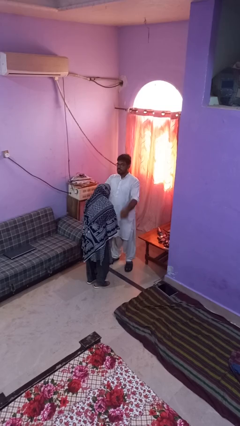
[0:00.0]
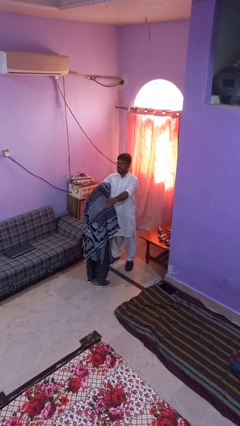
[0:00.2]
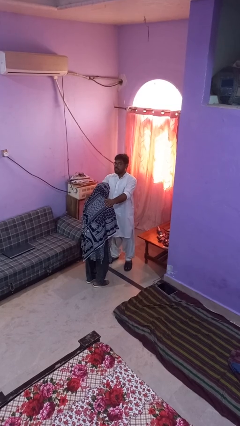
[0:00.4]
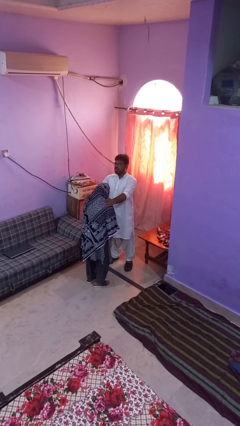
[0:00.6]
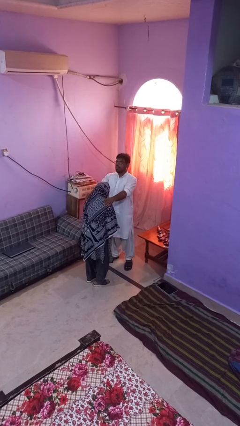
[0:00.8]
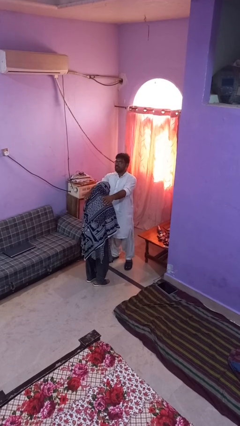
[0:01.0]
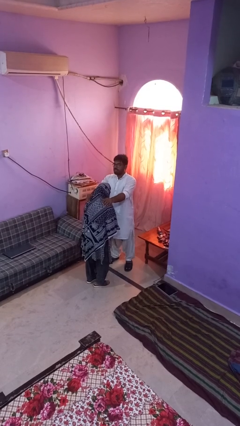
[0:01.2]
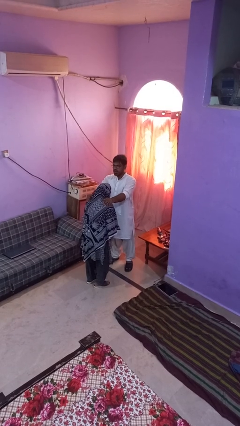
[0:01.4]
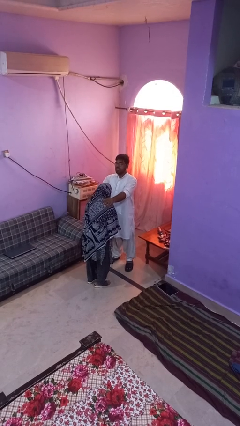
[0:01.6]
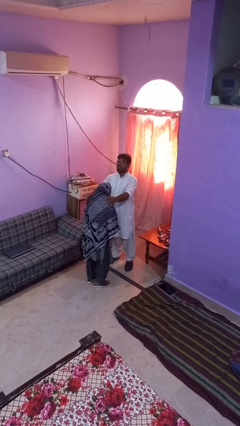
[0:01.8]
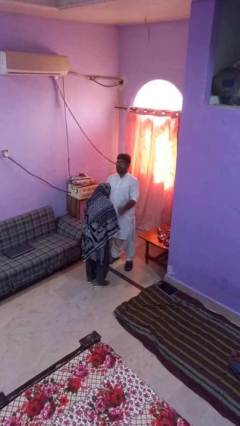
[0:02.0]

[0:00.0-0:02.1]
person pounds shoulders of person

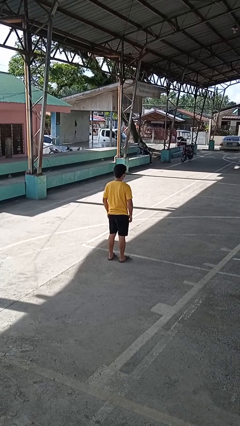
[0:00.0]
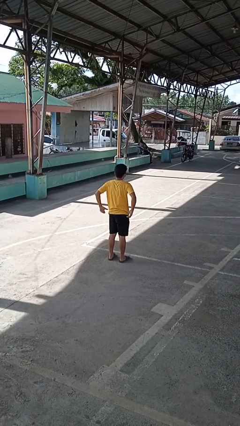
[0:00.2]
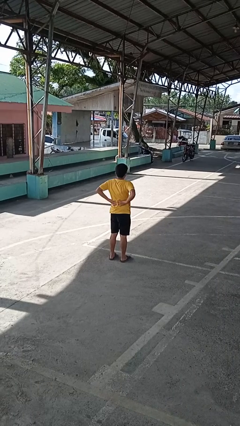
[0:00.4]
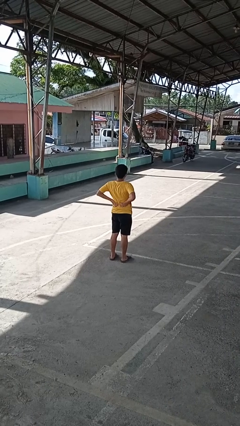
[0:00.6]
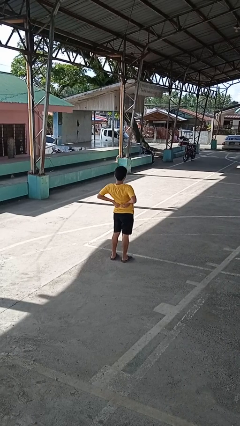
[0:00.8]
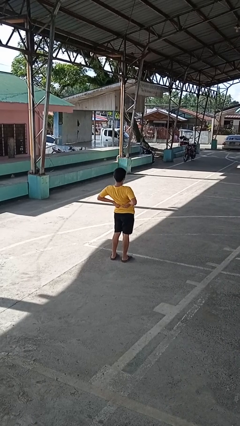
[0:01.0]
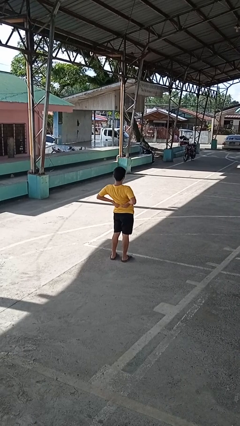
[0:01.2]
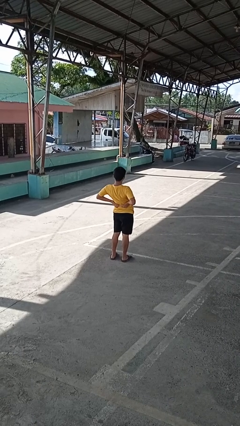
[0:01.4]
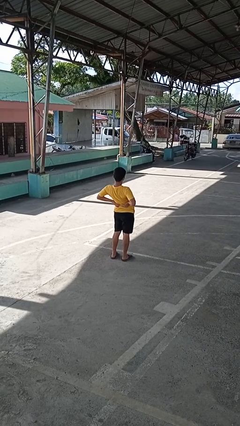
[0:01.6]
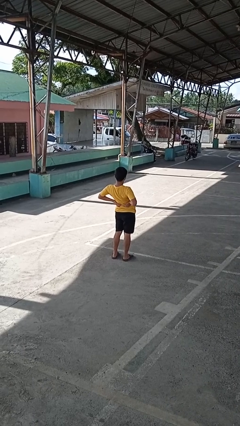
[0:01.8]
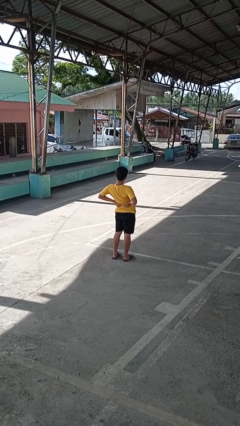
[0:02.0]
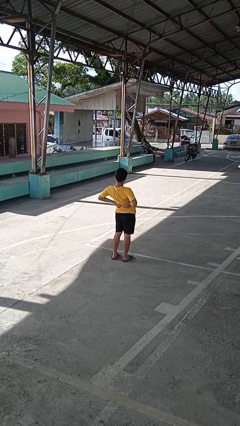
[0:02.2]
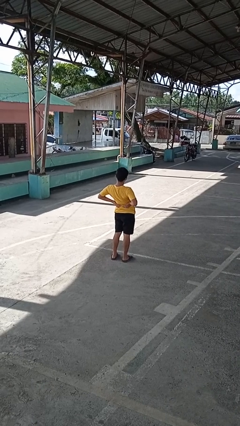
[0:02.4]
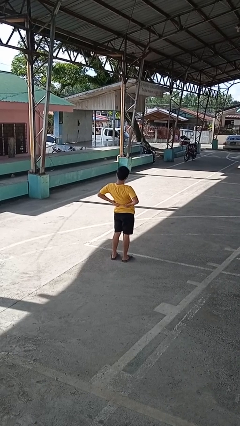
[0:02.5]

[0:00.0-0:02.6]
person stretches back

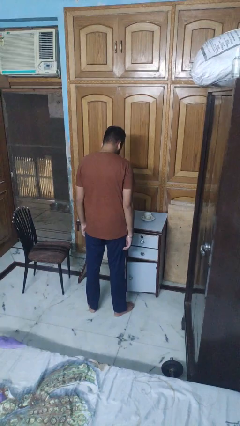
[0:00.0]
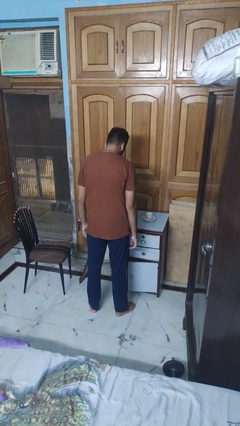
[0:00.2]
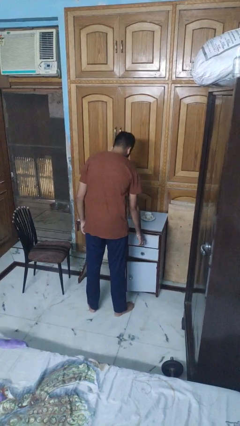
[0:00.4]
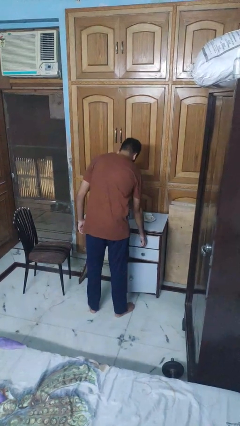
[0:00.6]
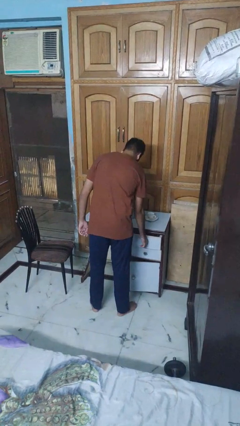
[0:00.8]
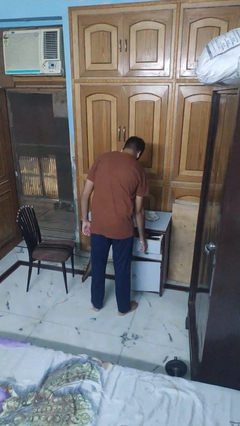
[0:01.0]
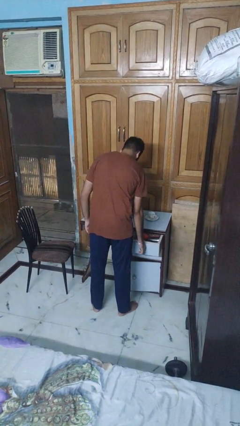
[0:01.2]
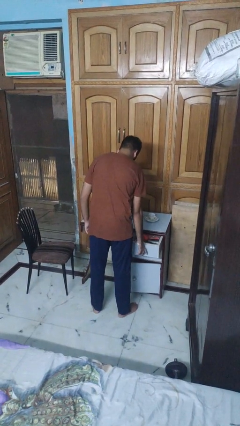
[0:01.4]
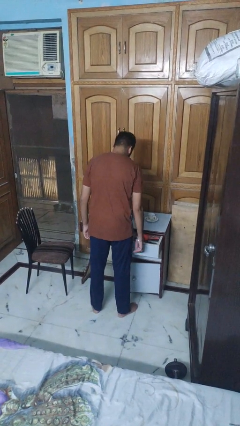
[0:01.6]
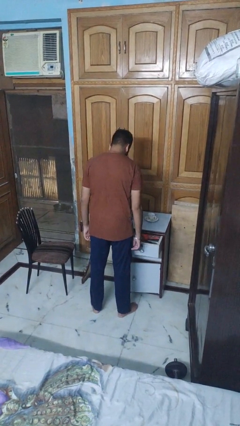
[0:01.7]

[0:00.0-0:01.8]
person opens kitchen drawer

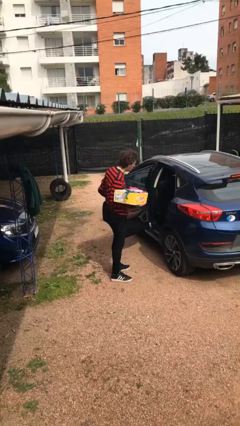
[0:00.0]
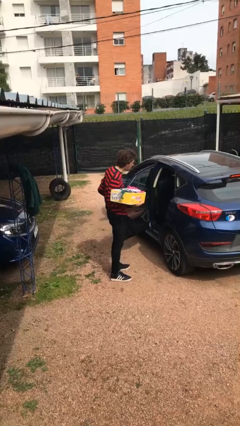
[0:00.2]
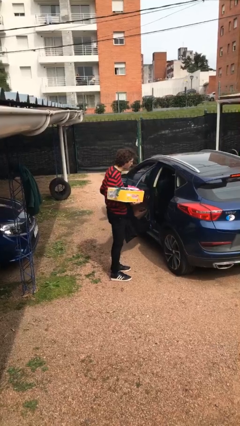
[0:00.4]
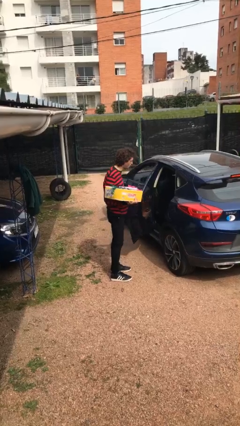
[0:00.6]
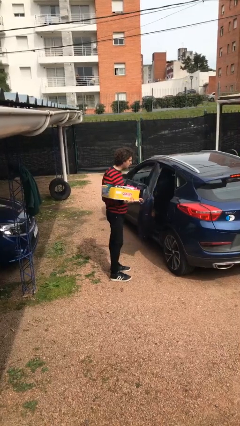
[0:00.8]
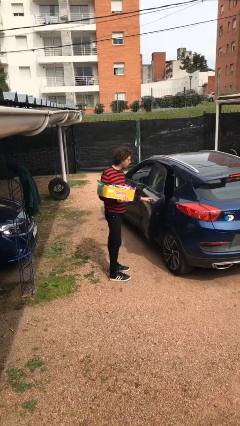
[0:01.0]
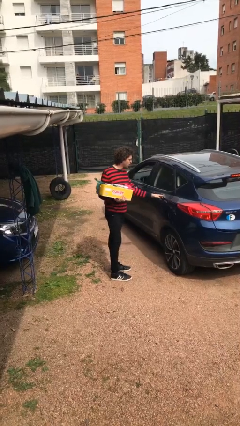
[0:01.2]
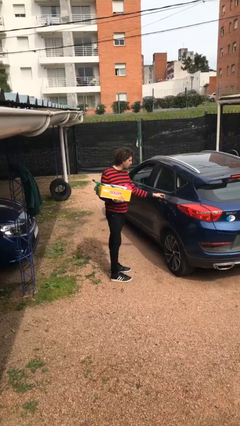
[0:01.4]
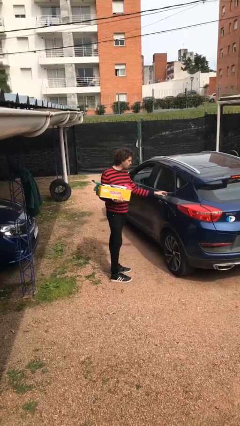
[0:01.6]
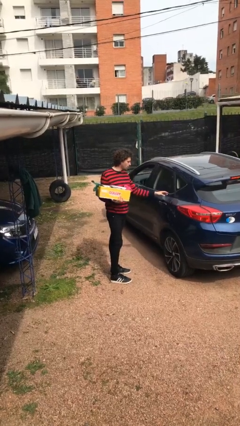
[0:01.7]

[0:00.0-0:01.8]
person closes car door

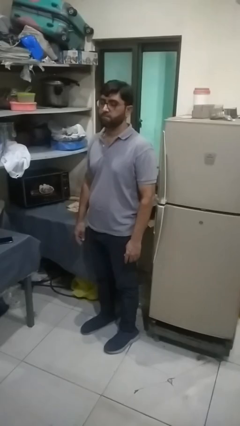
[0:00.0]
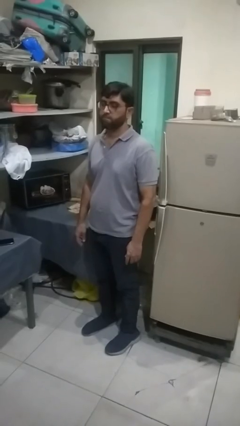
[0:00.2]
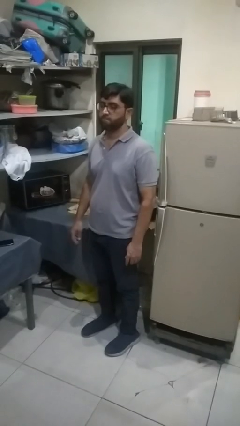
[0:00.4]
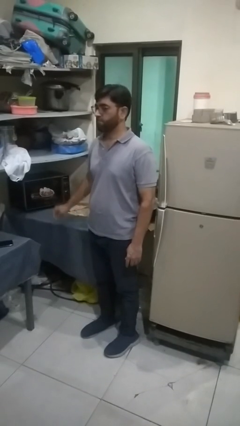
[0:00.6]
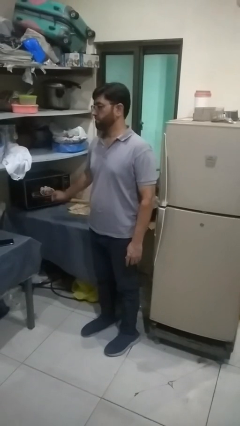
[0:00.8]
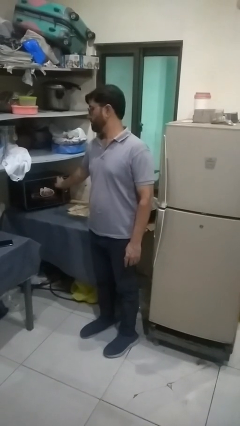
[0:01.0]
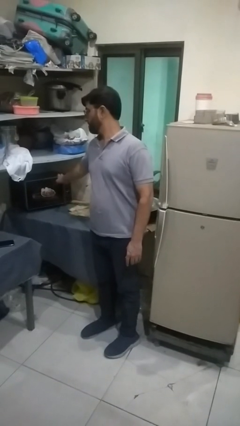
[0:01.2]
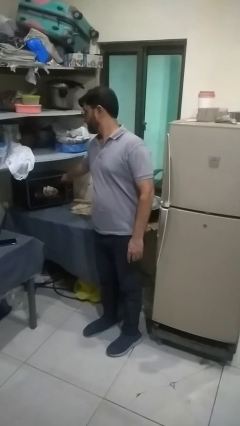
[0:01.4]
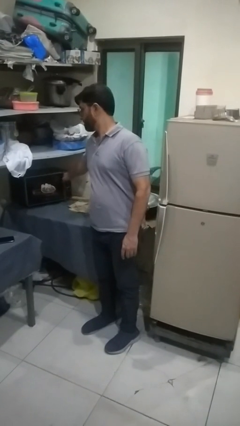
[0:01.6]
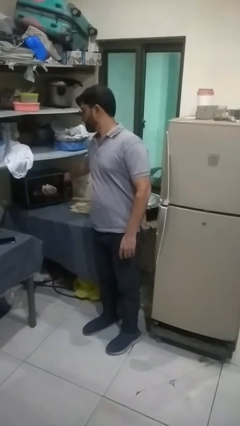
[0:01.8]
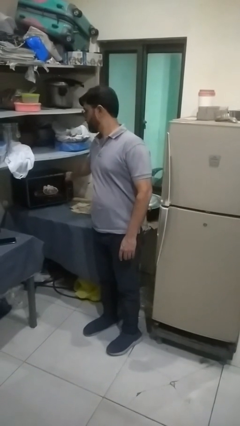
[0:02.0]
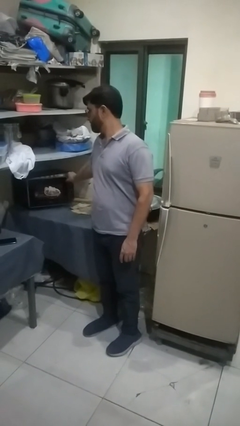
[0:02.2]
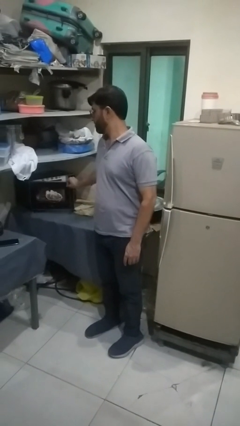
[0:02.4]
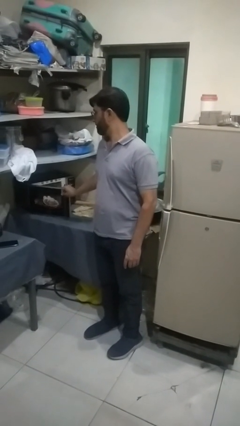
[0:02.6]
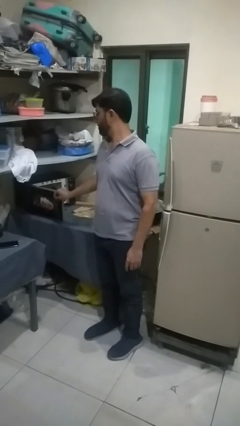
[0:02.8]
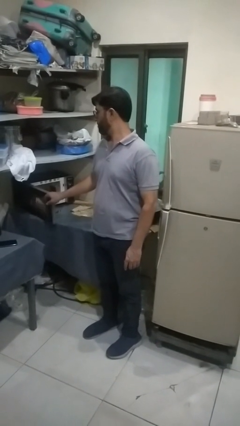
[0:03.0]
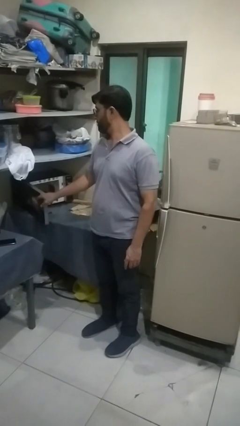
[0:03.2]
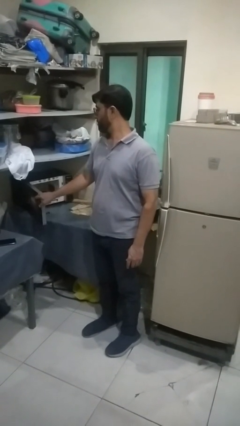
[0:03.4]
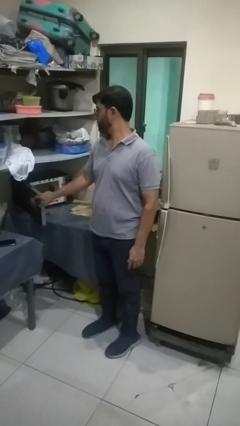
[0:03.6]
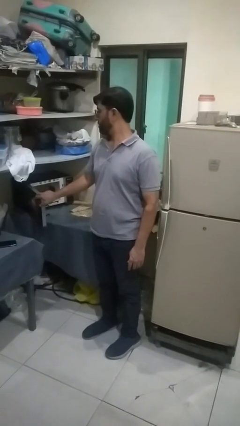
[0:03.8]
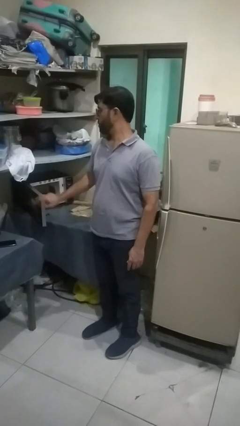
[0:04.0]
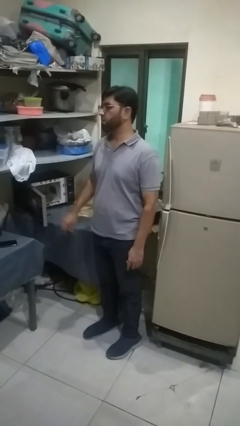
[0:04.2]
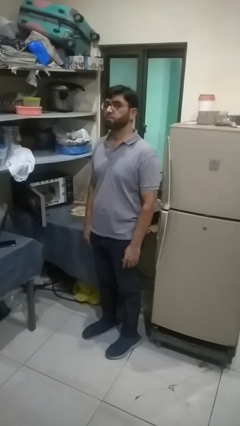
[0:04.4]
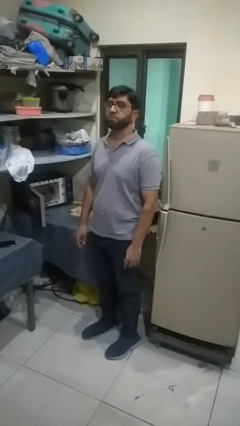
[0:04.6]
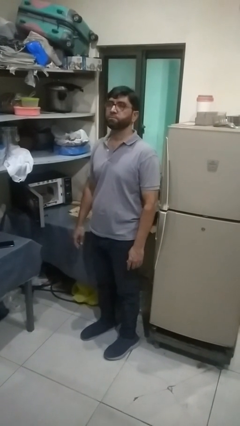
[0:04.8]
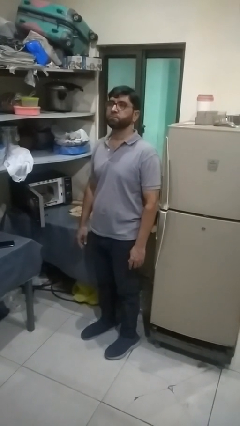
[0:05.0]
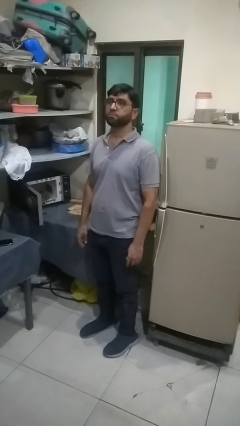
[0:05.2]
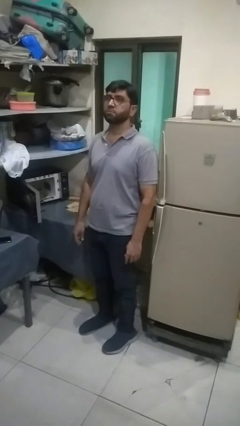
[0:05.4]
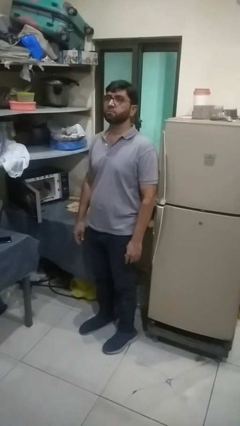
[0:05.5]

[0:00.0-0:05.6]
person opens oven door

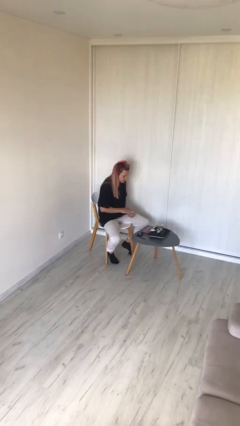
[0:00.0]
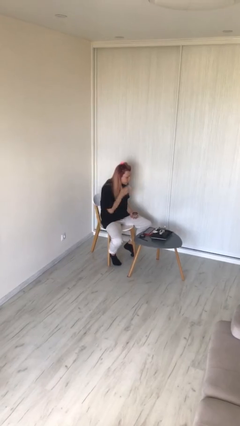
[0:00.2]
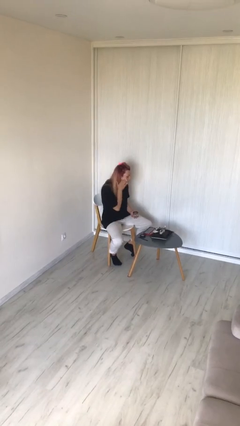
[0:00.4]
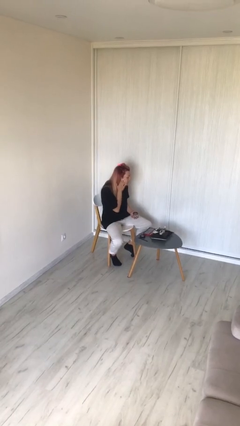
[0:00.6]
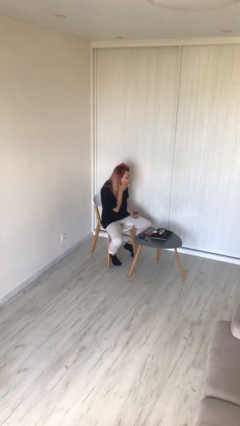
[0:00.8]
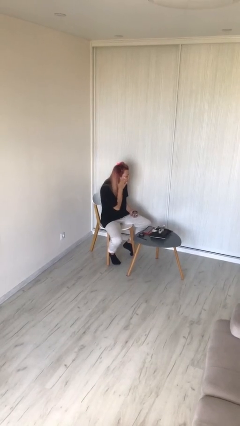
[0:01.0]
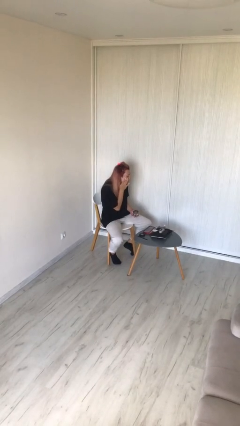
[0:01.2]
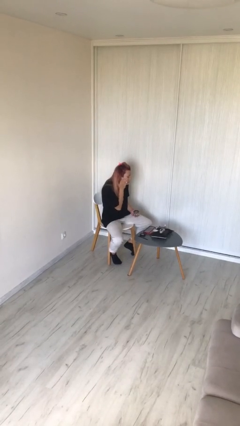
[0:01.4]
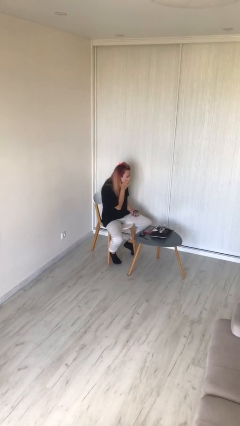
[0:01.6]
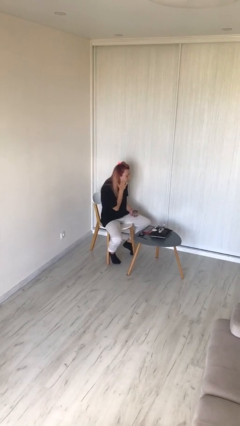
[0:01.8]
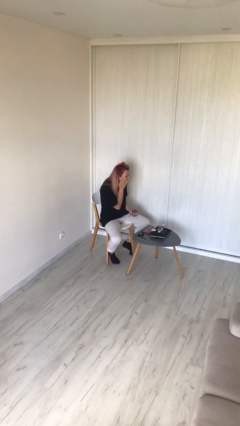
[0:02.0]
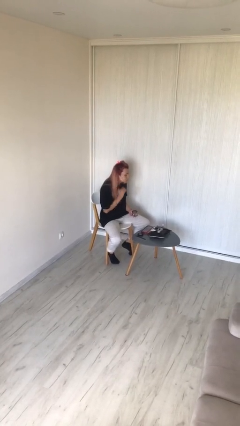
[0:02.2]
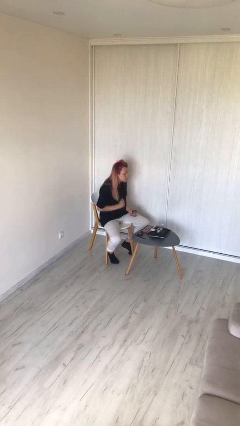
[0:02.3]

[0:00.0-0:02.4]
person applies foundation makeup

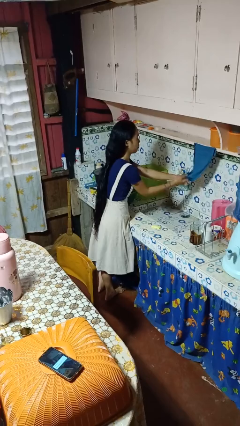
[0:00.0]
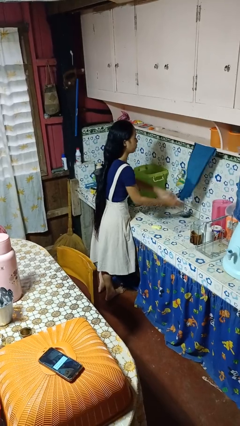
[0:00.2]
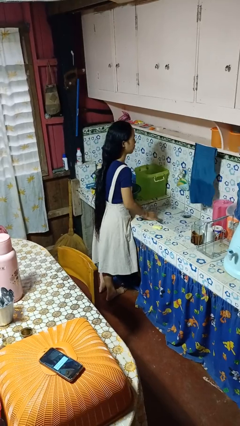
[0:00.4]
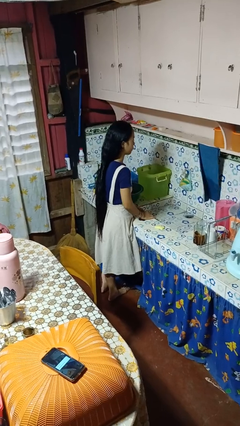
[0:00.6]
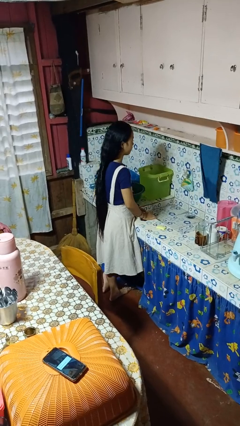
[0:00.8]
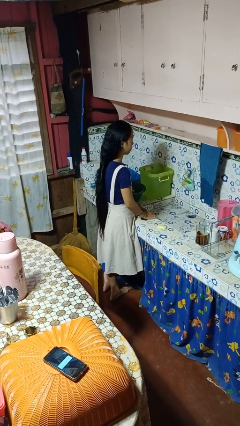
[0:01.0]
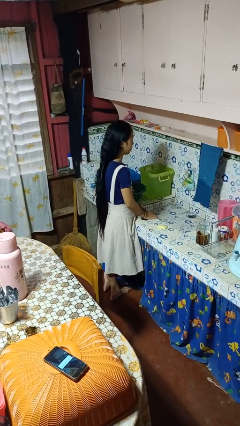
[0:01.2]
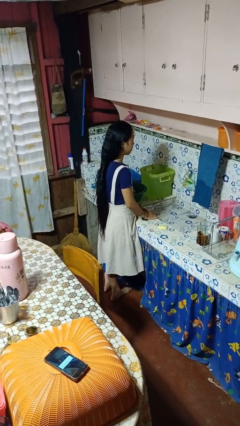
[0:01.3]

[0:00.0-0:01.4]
person dries hands with towel
